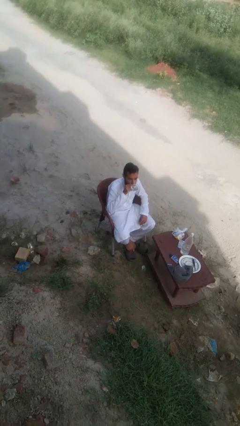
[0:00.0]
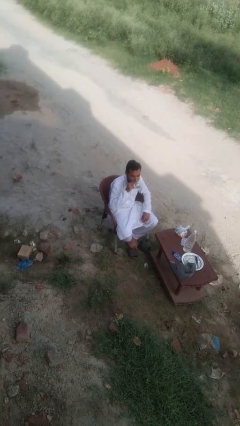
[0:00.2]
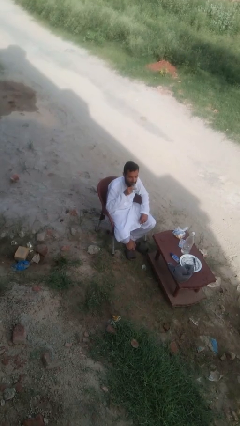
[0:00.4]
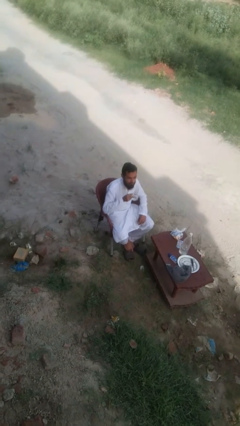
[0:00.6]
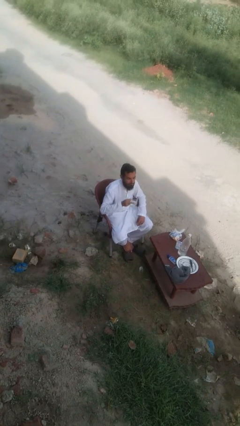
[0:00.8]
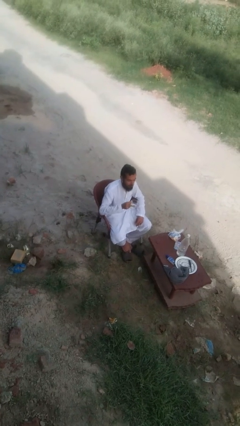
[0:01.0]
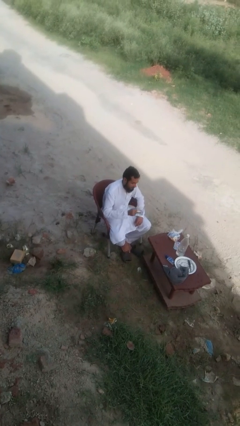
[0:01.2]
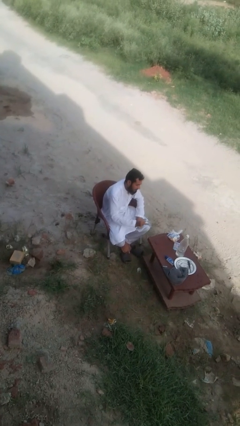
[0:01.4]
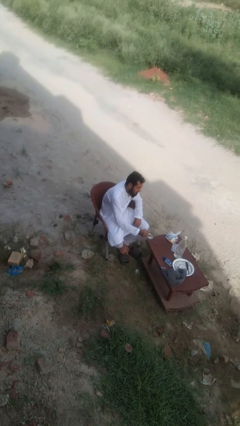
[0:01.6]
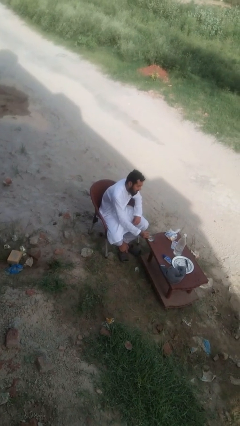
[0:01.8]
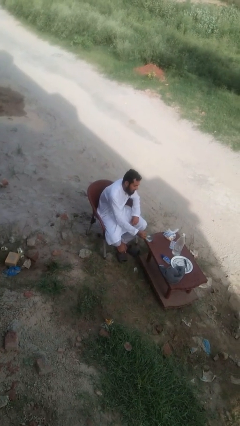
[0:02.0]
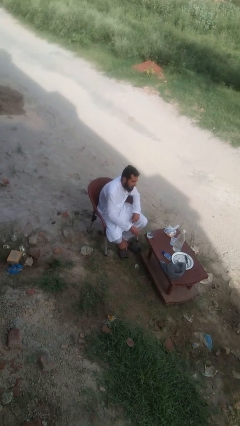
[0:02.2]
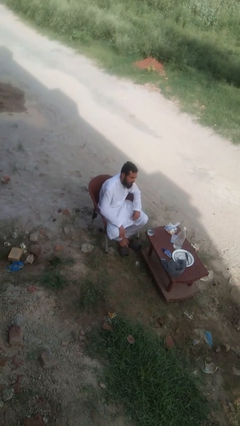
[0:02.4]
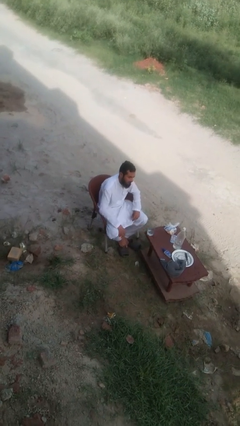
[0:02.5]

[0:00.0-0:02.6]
person puts down object on table

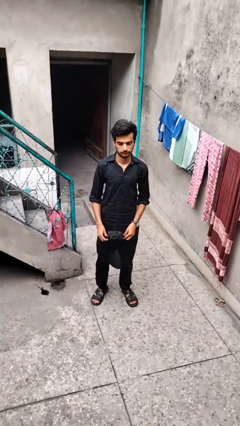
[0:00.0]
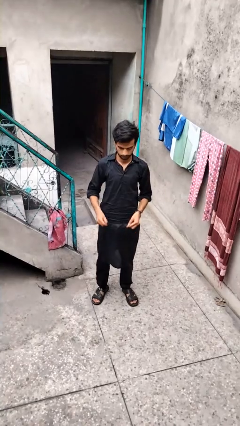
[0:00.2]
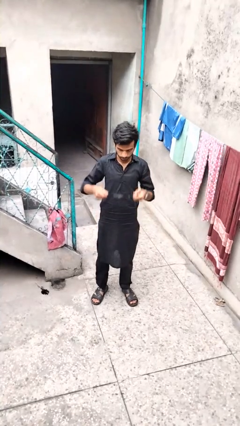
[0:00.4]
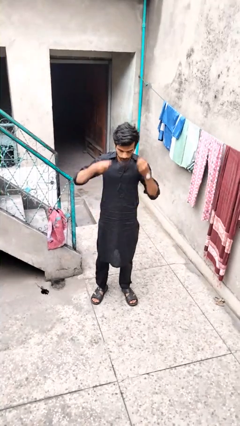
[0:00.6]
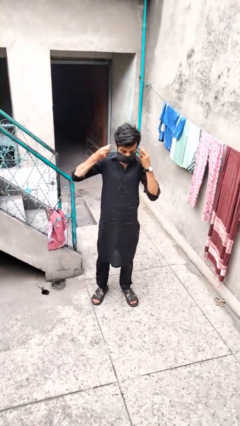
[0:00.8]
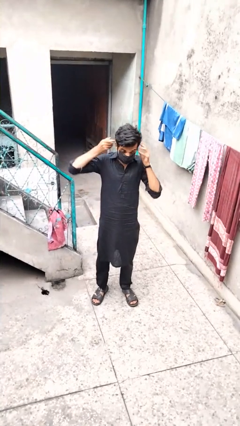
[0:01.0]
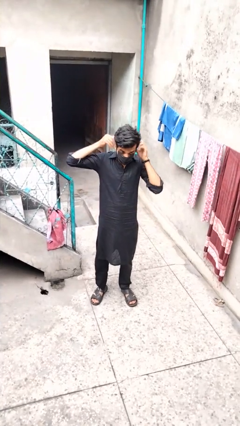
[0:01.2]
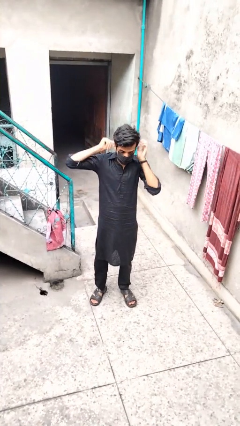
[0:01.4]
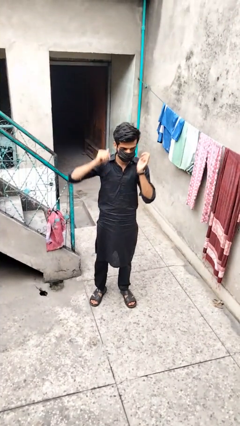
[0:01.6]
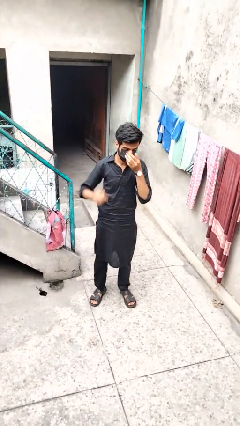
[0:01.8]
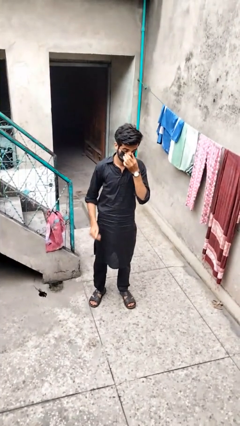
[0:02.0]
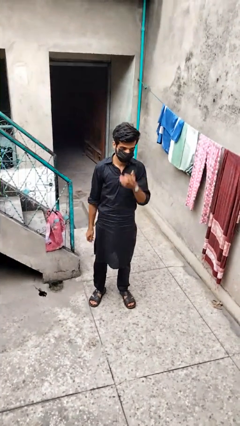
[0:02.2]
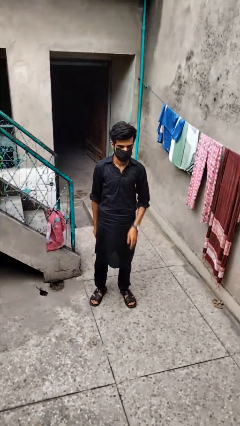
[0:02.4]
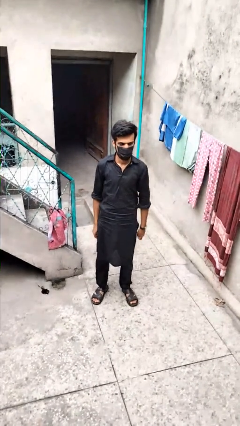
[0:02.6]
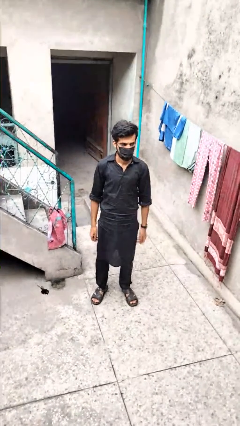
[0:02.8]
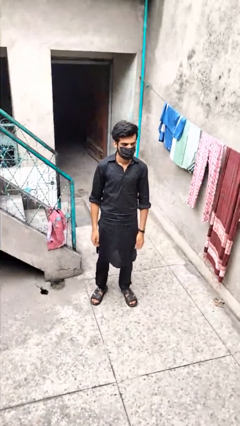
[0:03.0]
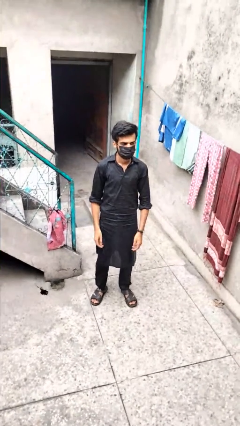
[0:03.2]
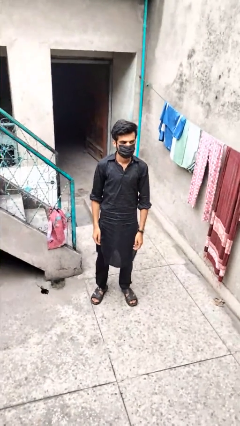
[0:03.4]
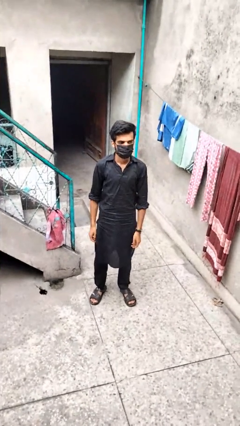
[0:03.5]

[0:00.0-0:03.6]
person puts on facemask

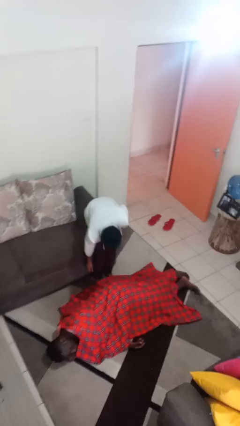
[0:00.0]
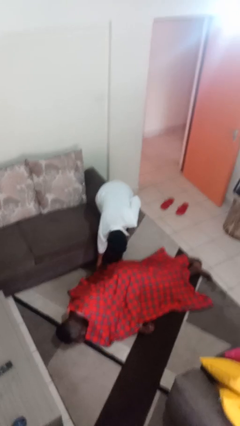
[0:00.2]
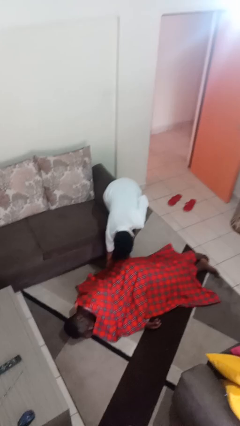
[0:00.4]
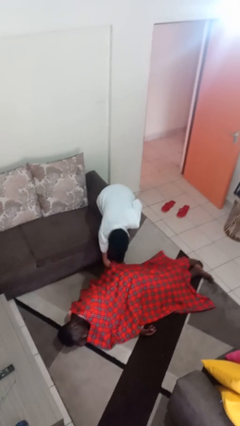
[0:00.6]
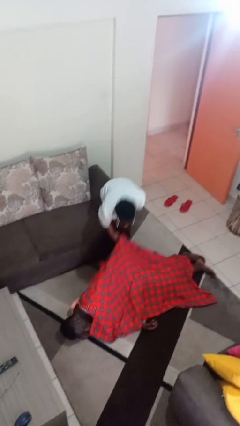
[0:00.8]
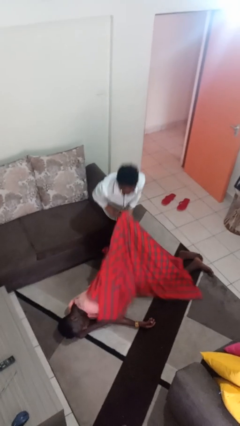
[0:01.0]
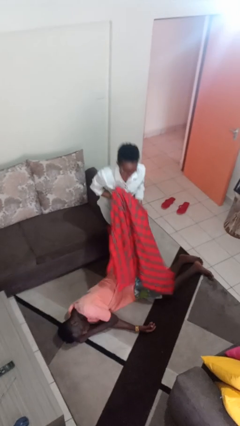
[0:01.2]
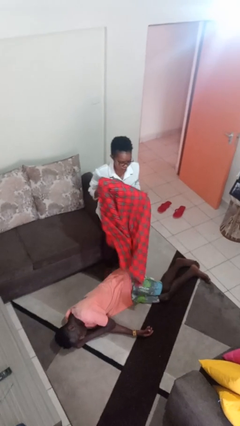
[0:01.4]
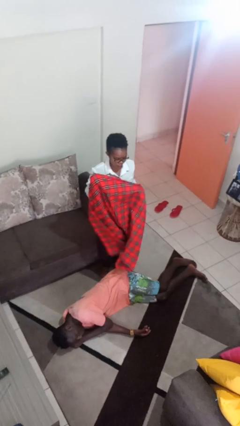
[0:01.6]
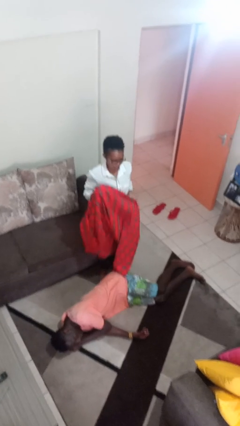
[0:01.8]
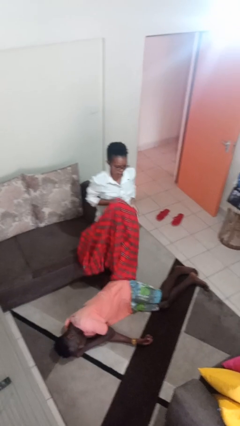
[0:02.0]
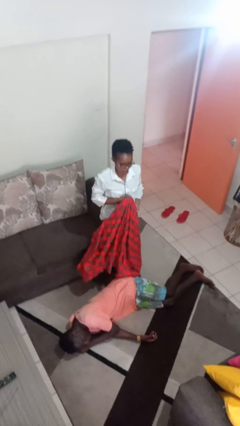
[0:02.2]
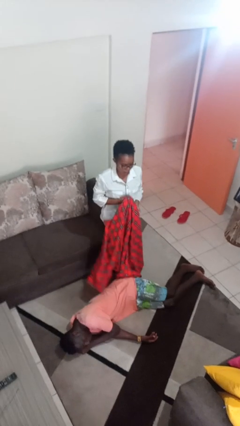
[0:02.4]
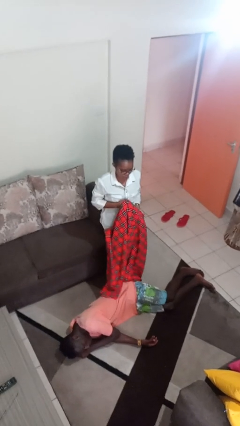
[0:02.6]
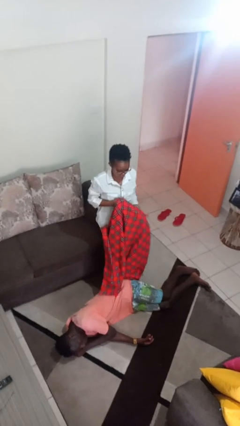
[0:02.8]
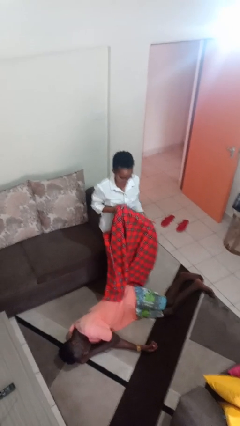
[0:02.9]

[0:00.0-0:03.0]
person uncovers friend with blanket

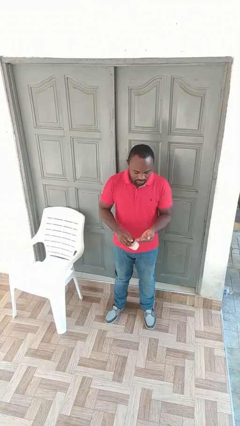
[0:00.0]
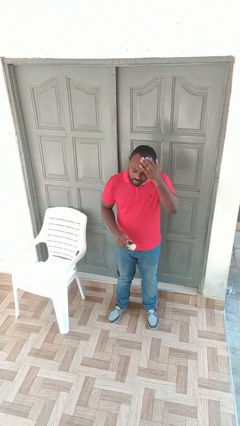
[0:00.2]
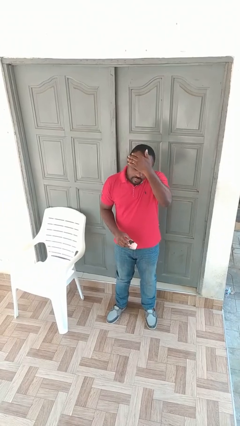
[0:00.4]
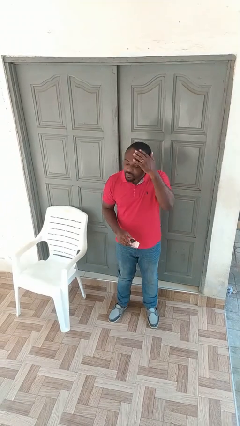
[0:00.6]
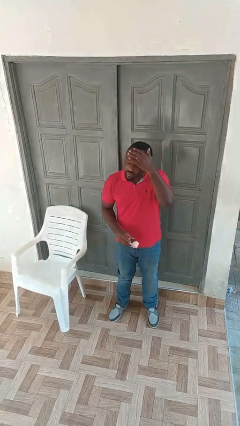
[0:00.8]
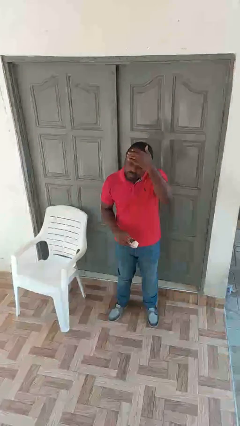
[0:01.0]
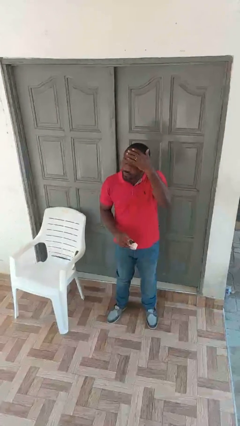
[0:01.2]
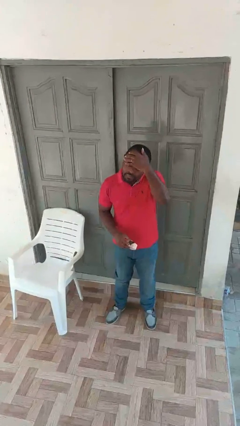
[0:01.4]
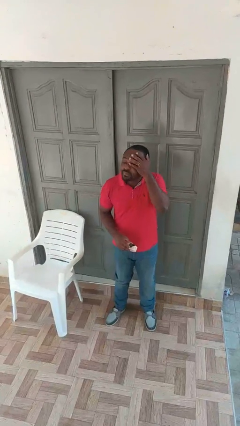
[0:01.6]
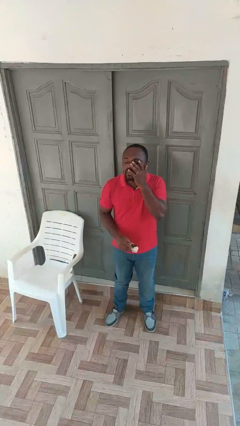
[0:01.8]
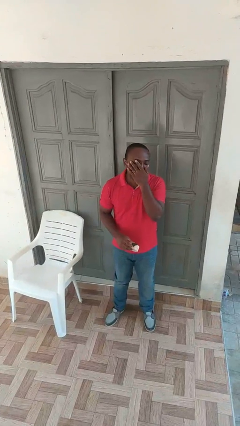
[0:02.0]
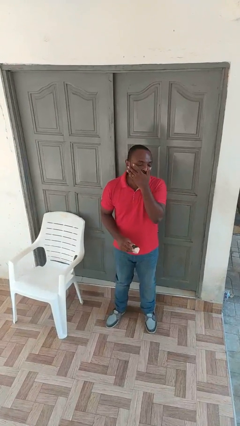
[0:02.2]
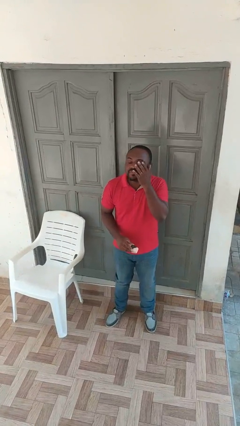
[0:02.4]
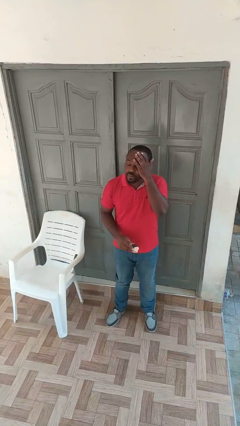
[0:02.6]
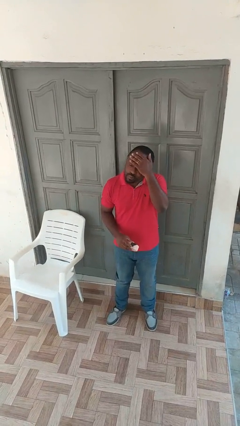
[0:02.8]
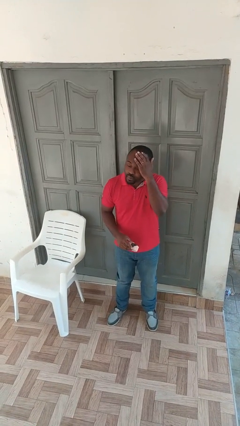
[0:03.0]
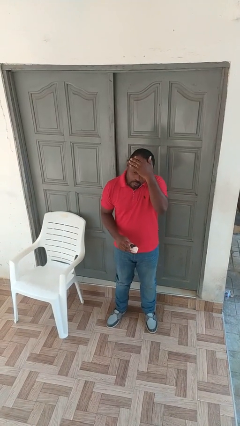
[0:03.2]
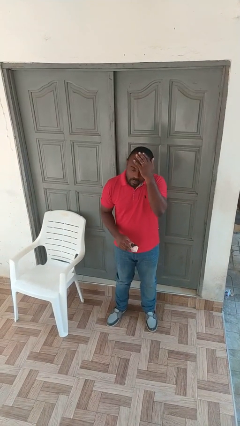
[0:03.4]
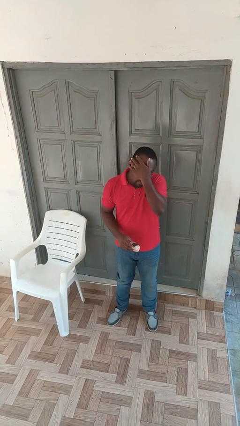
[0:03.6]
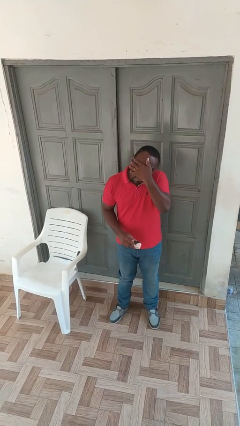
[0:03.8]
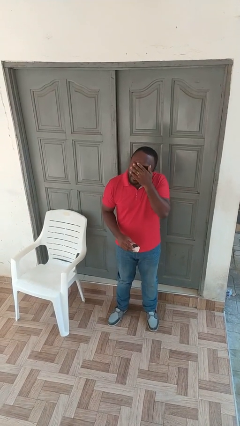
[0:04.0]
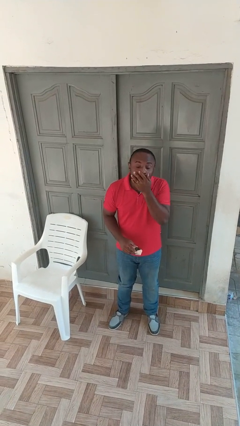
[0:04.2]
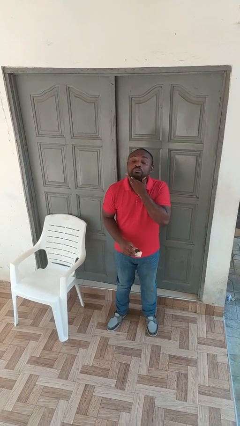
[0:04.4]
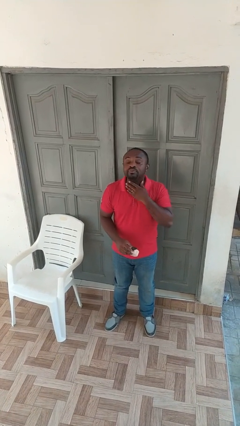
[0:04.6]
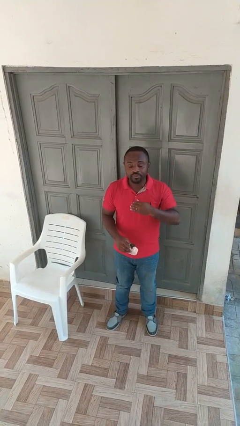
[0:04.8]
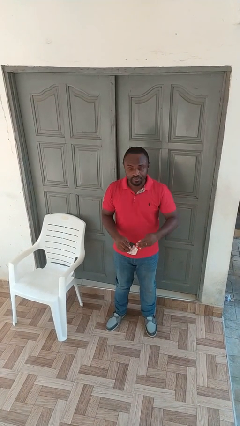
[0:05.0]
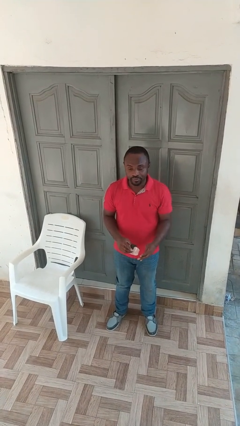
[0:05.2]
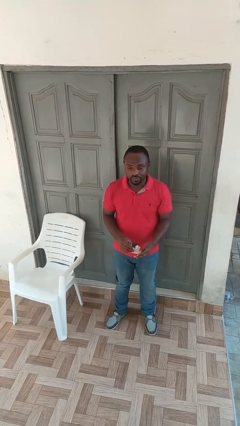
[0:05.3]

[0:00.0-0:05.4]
person applies sunscreen

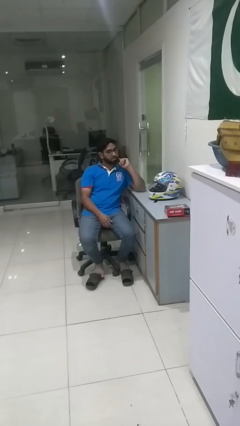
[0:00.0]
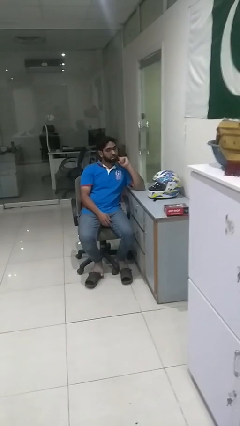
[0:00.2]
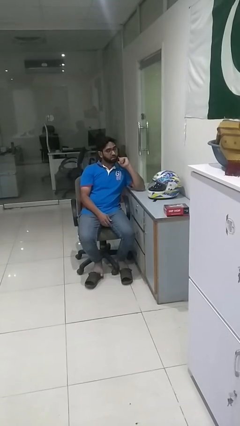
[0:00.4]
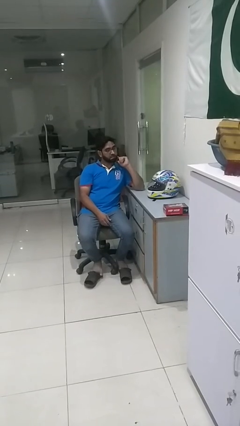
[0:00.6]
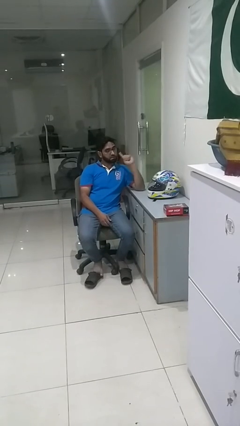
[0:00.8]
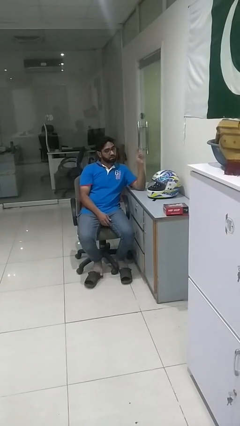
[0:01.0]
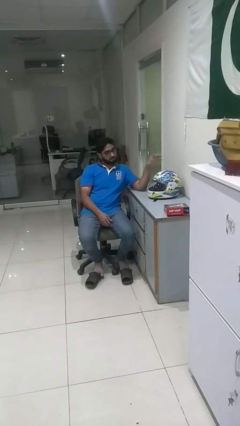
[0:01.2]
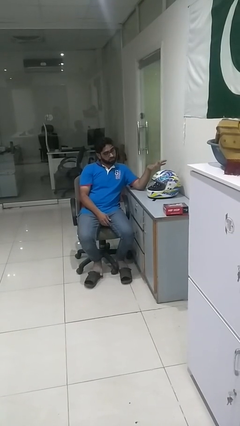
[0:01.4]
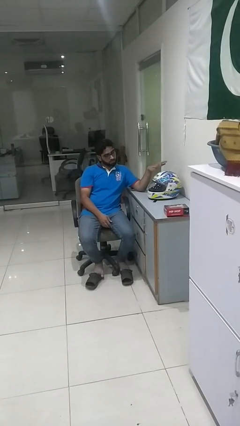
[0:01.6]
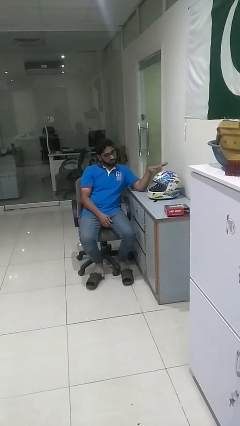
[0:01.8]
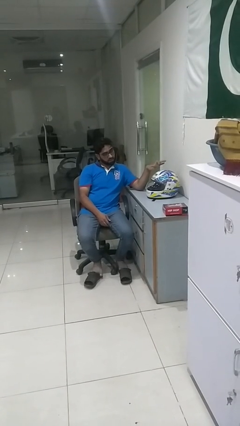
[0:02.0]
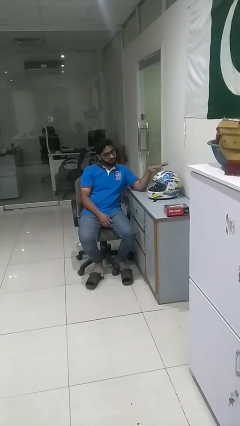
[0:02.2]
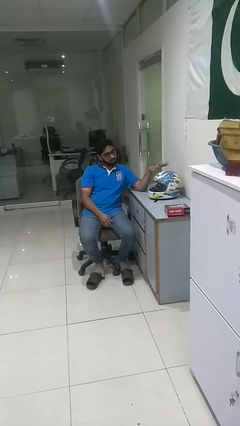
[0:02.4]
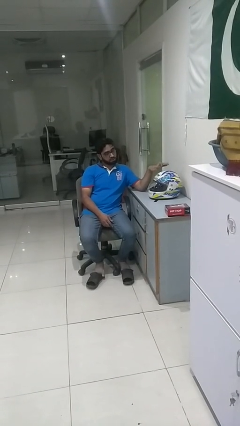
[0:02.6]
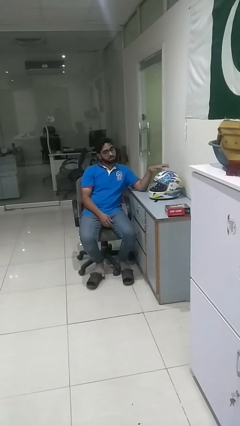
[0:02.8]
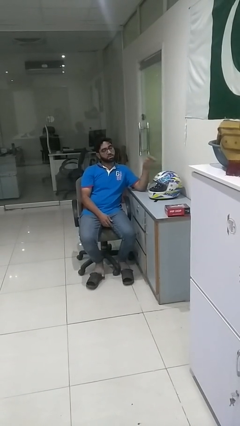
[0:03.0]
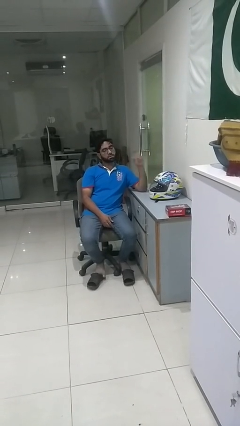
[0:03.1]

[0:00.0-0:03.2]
person taps object with finger
